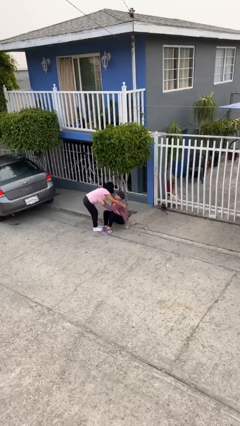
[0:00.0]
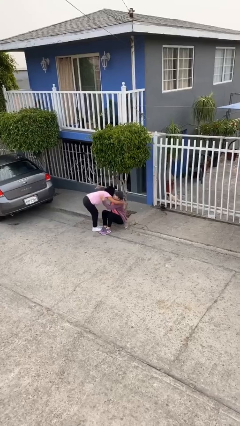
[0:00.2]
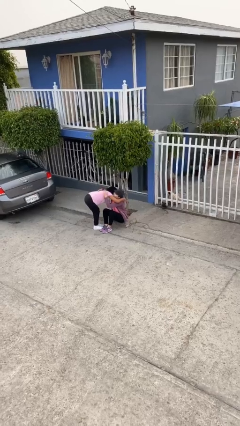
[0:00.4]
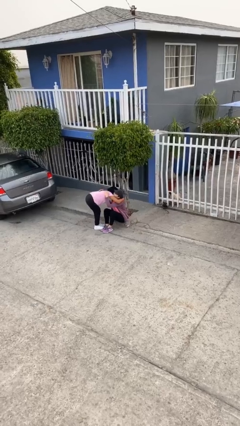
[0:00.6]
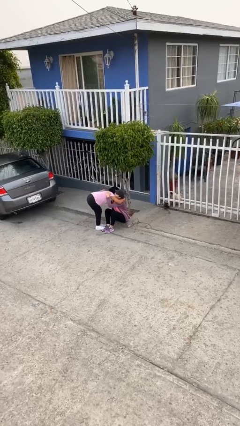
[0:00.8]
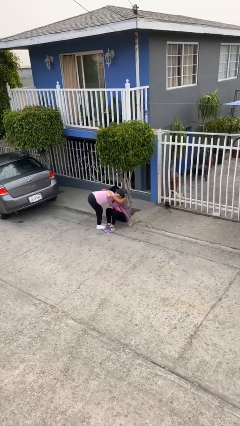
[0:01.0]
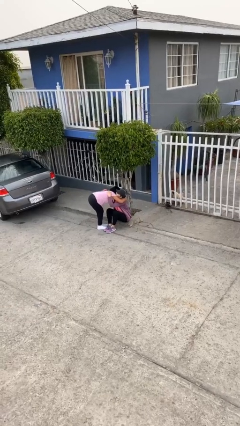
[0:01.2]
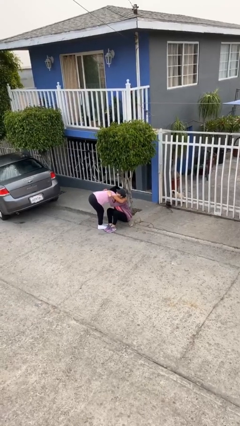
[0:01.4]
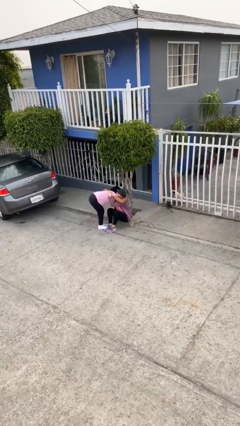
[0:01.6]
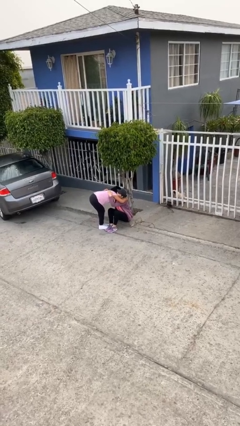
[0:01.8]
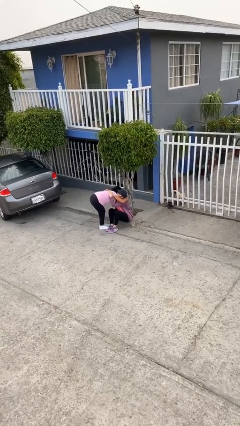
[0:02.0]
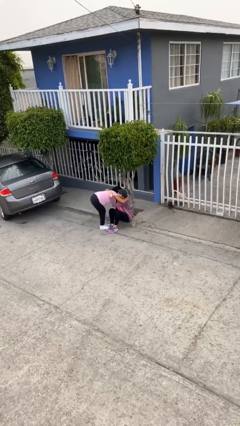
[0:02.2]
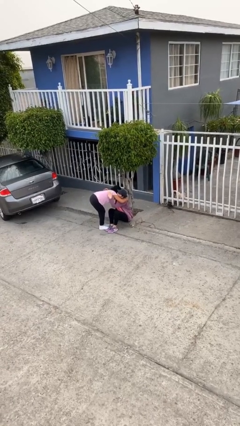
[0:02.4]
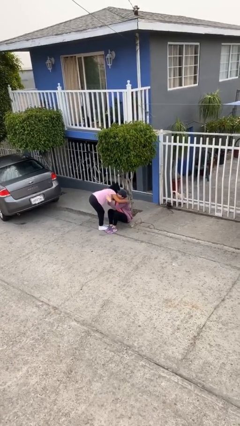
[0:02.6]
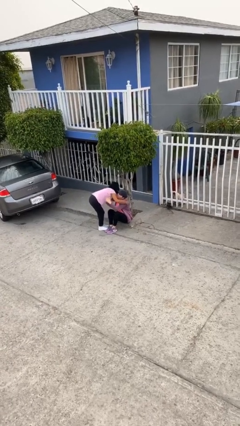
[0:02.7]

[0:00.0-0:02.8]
person embraces person

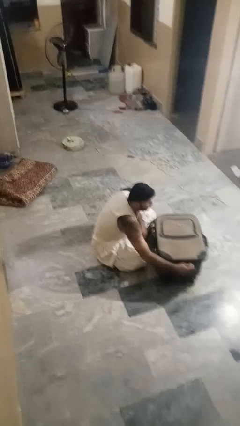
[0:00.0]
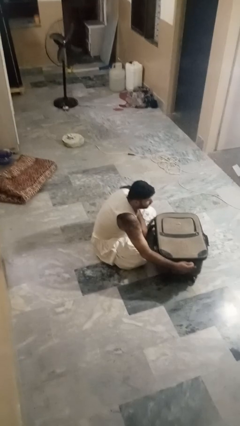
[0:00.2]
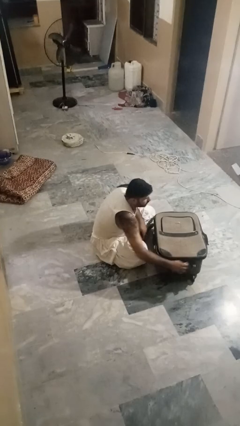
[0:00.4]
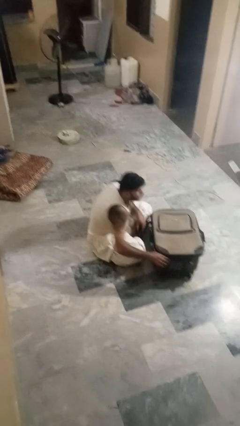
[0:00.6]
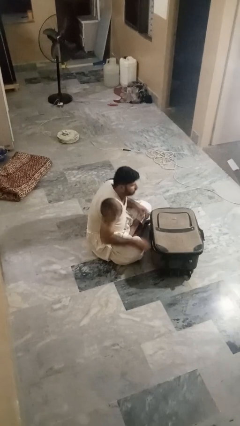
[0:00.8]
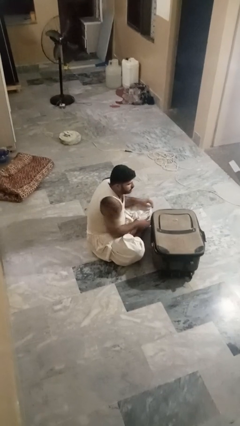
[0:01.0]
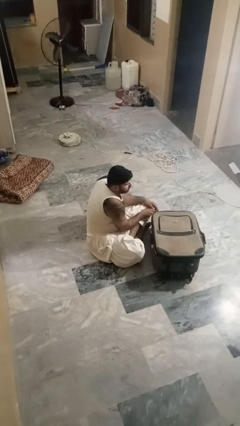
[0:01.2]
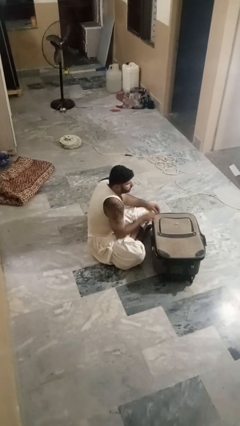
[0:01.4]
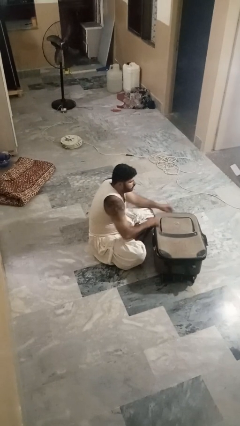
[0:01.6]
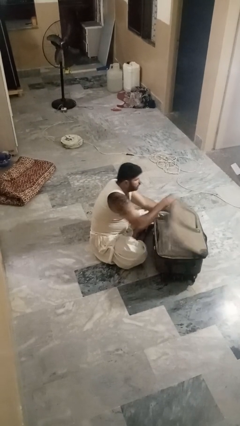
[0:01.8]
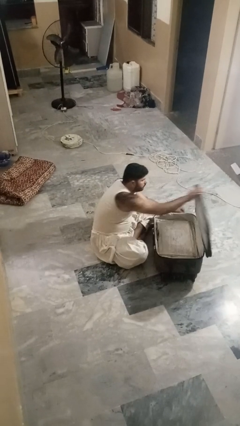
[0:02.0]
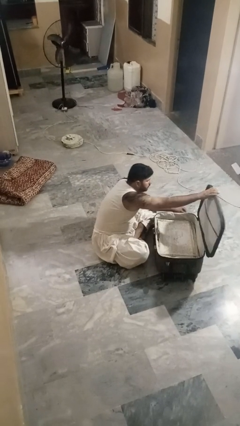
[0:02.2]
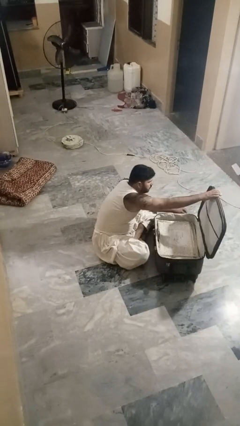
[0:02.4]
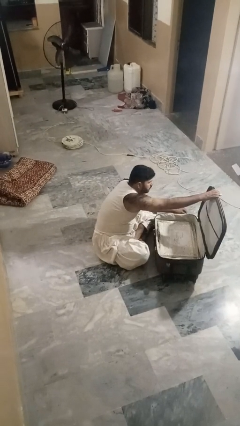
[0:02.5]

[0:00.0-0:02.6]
person opens suitcase

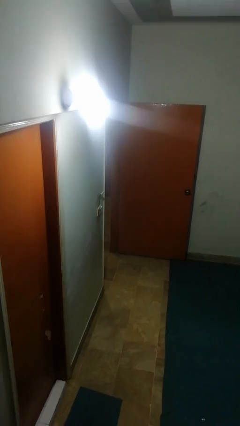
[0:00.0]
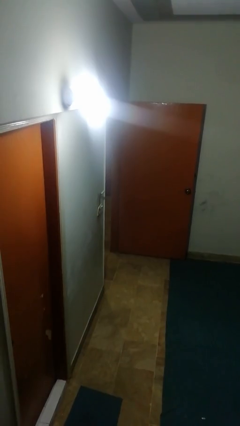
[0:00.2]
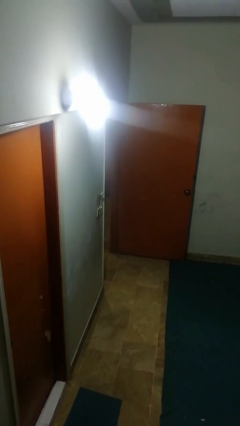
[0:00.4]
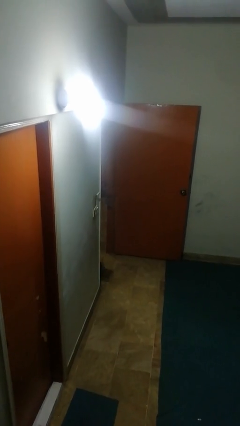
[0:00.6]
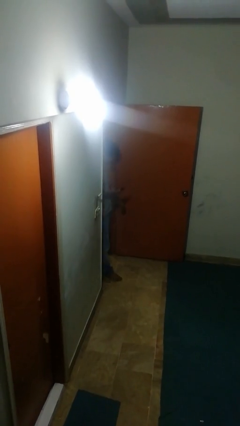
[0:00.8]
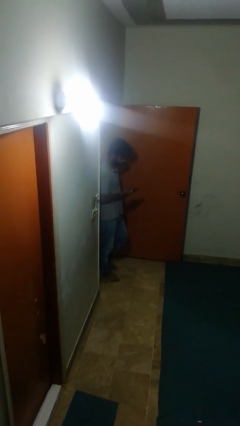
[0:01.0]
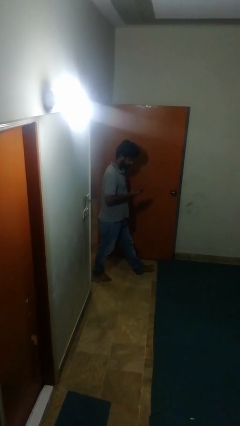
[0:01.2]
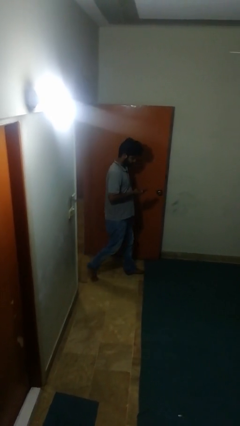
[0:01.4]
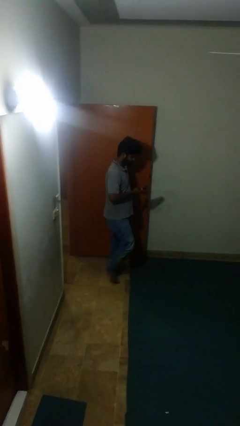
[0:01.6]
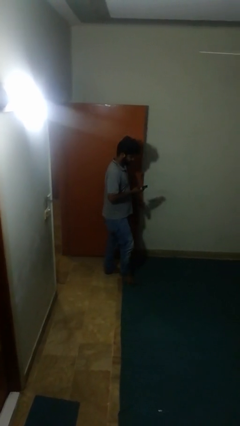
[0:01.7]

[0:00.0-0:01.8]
person enters scene through structure

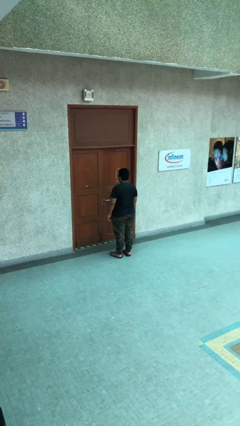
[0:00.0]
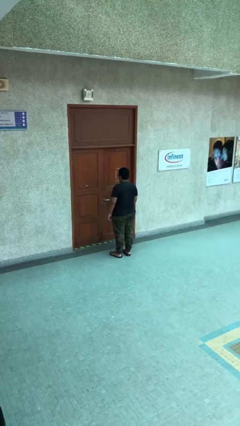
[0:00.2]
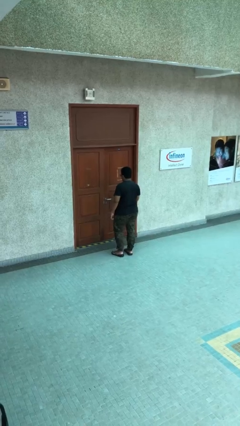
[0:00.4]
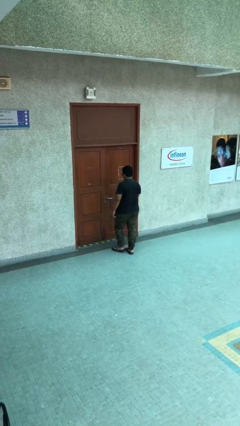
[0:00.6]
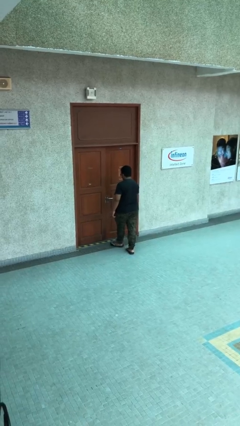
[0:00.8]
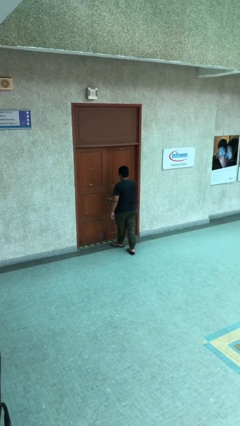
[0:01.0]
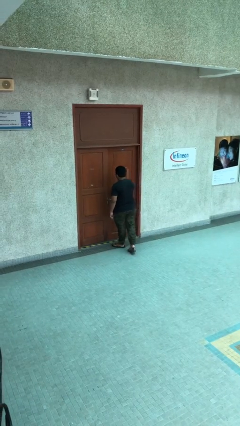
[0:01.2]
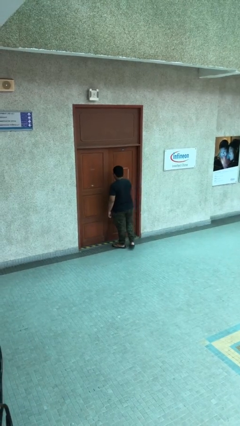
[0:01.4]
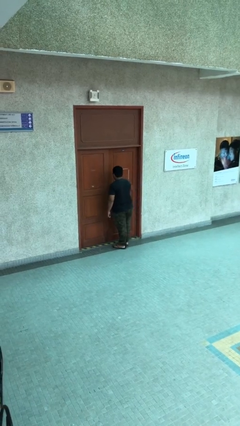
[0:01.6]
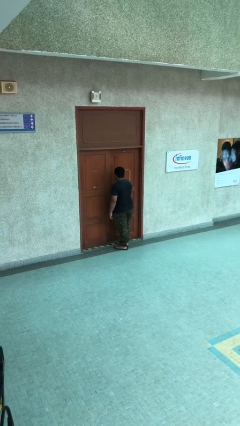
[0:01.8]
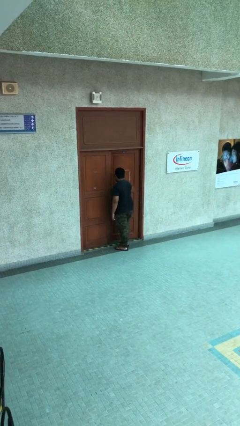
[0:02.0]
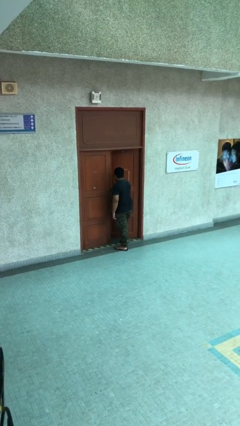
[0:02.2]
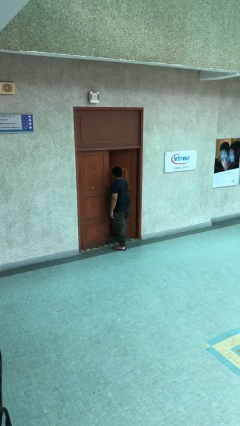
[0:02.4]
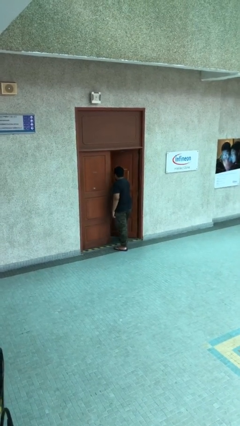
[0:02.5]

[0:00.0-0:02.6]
person opens facility door

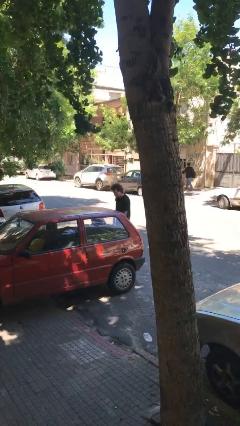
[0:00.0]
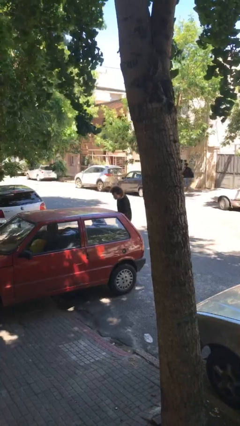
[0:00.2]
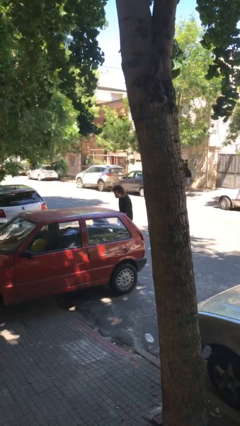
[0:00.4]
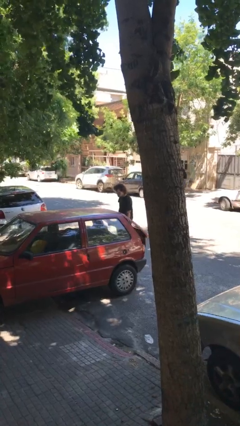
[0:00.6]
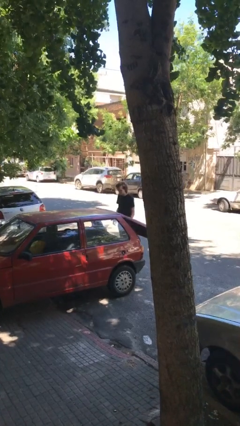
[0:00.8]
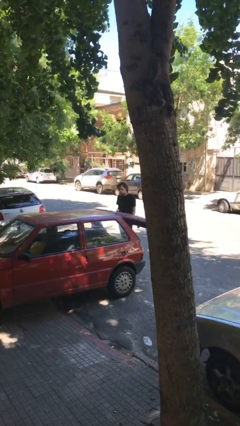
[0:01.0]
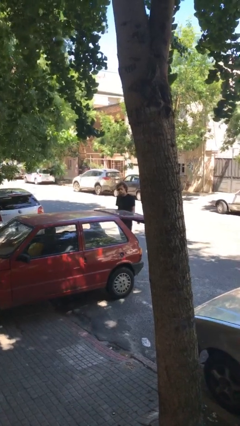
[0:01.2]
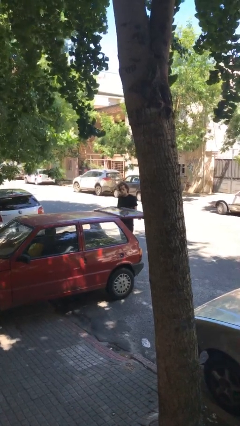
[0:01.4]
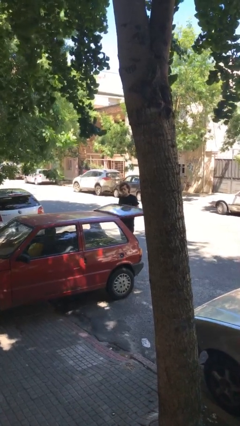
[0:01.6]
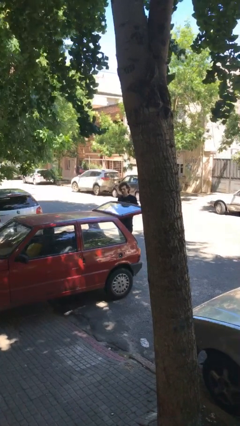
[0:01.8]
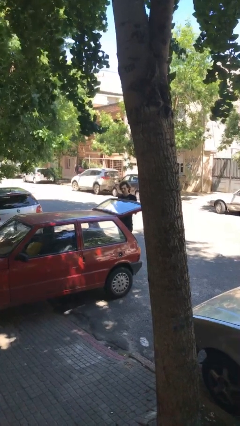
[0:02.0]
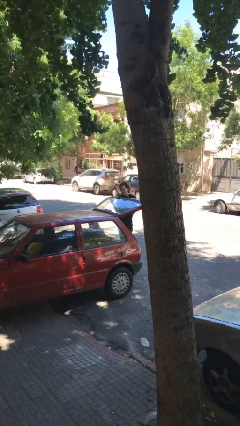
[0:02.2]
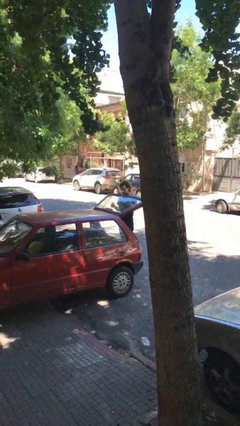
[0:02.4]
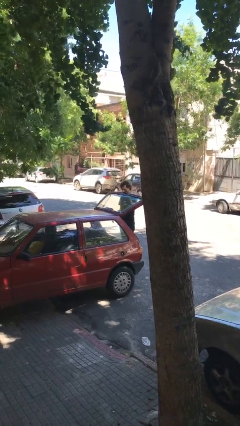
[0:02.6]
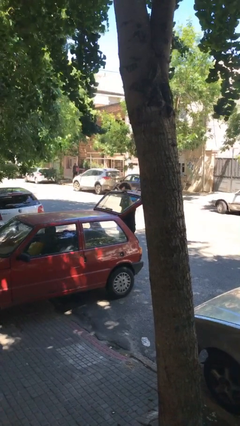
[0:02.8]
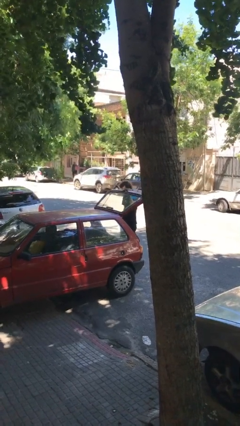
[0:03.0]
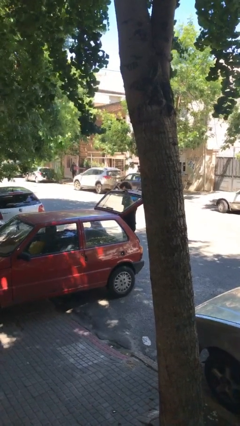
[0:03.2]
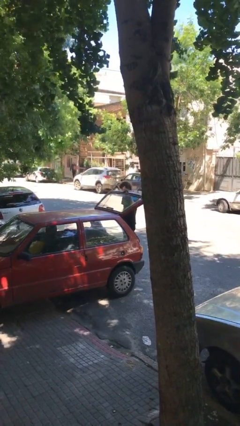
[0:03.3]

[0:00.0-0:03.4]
person opens car trunk

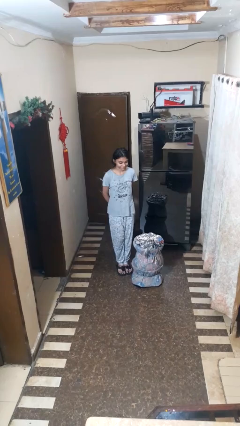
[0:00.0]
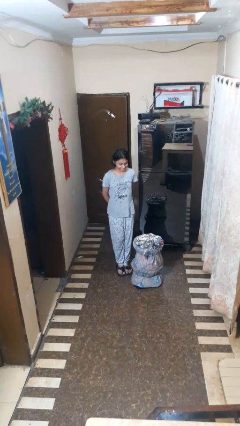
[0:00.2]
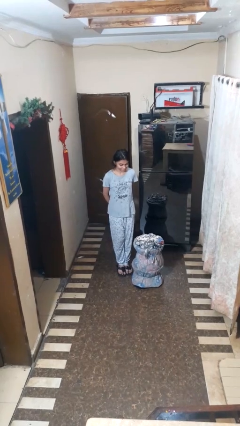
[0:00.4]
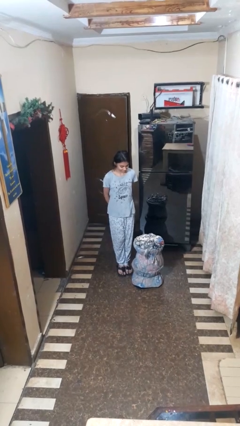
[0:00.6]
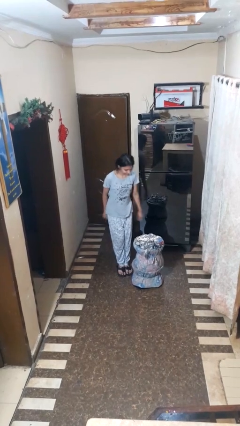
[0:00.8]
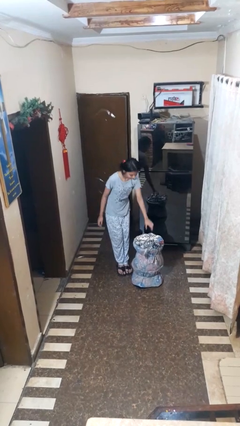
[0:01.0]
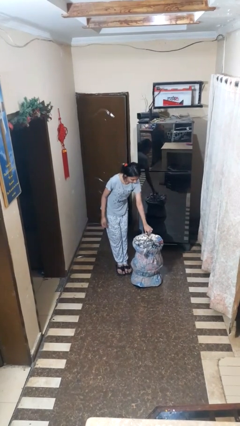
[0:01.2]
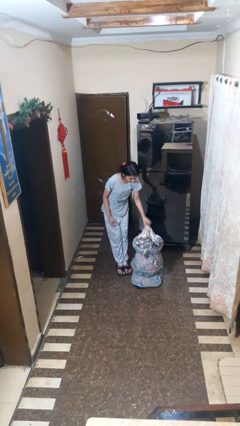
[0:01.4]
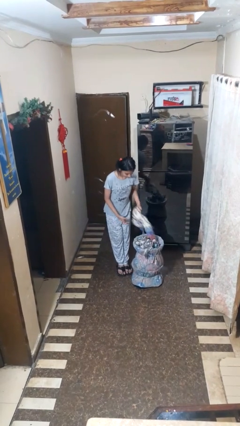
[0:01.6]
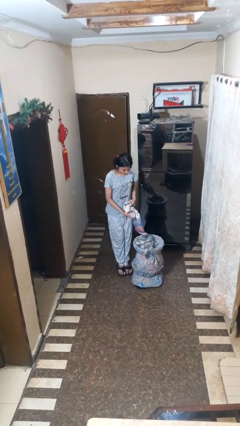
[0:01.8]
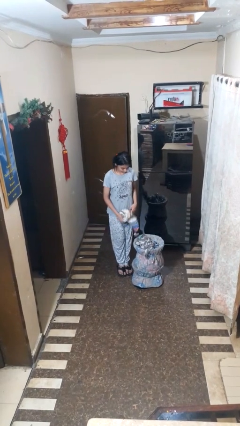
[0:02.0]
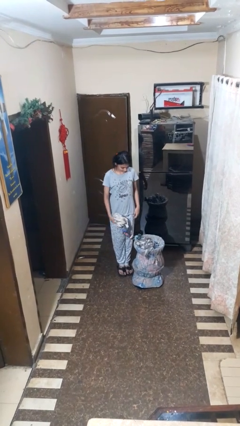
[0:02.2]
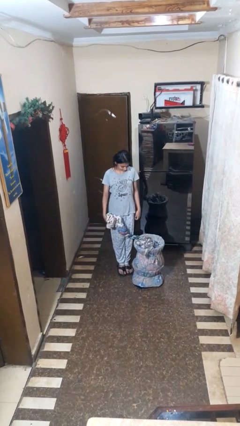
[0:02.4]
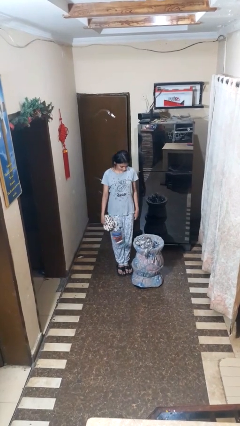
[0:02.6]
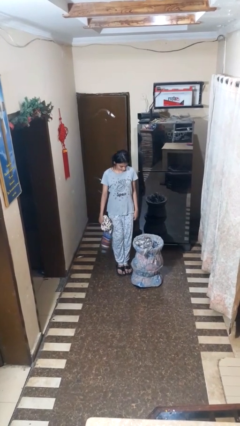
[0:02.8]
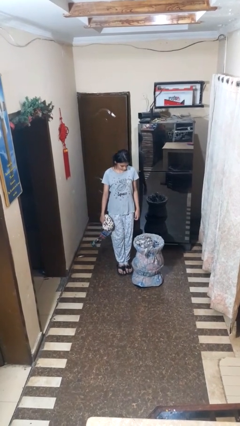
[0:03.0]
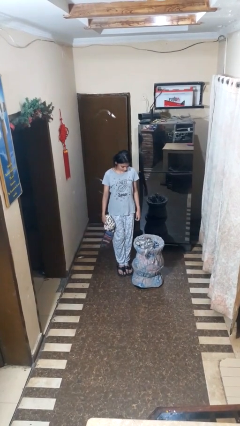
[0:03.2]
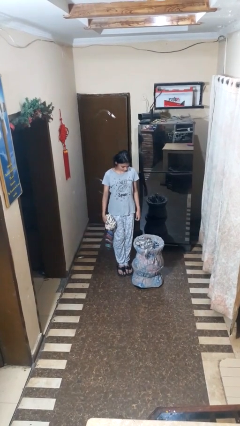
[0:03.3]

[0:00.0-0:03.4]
person puts object into basket

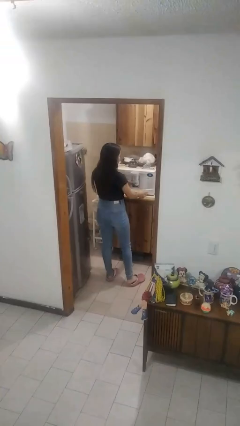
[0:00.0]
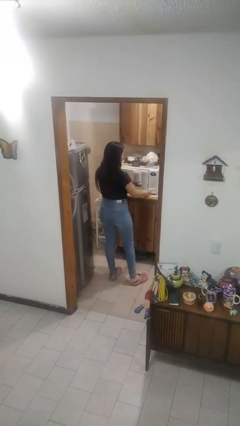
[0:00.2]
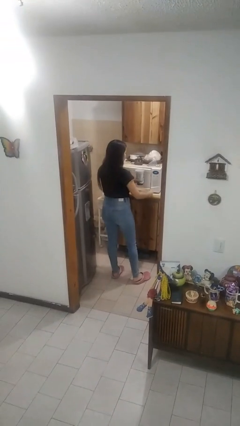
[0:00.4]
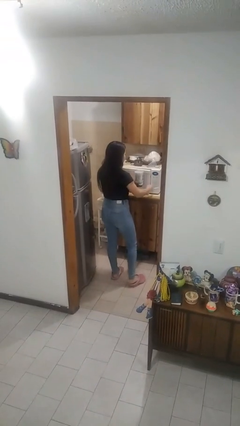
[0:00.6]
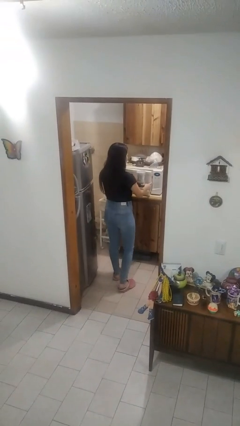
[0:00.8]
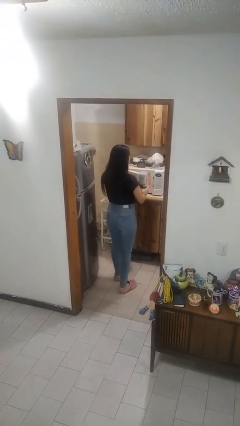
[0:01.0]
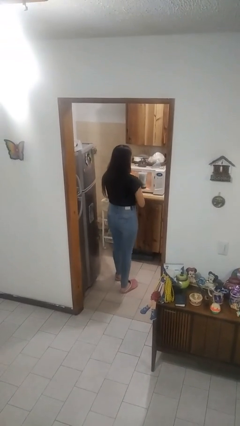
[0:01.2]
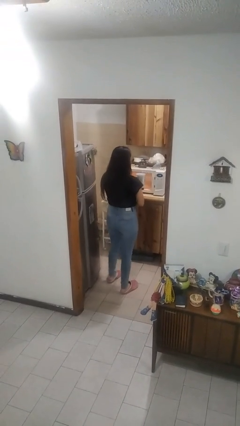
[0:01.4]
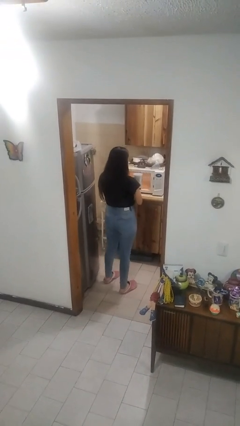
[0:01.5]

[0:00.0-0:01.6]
person opens microwave
